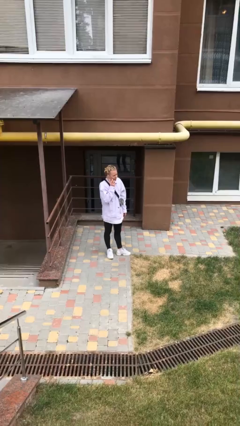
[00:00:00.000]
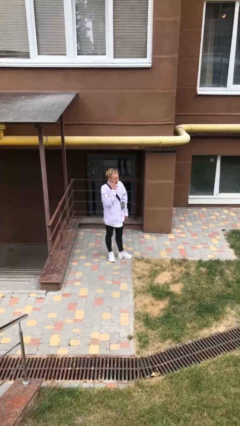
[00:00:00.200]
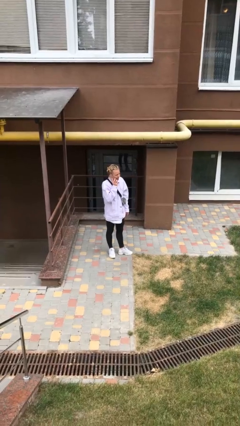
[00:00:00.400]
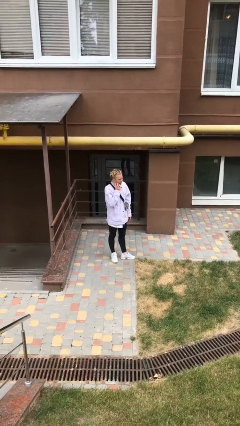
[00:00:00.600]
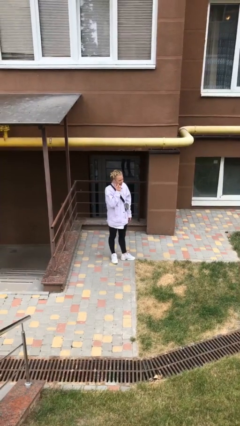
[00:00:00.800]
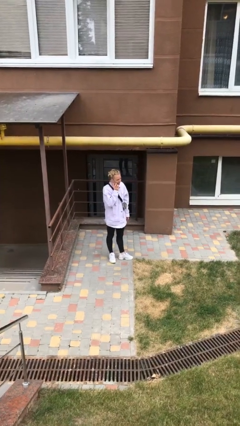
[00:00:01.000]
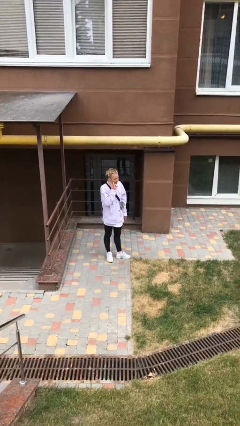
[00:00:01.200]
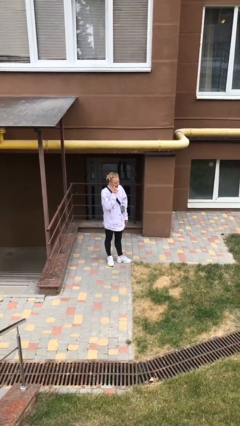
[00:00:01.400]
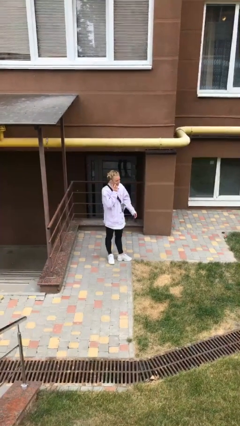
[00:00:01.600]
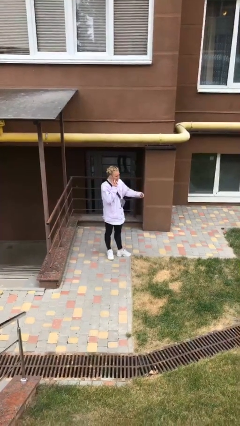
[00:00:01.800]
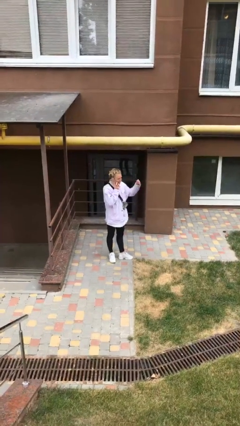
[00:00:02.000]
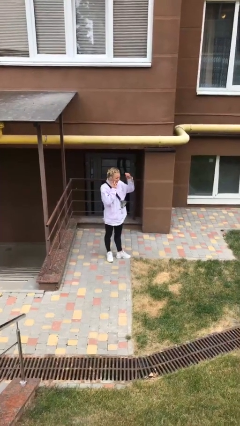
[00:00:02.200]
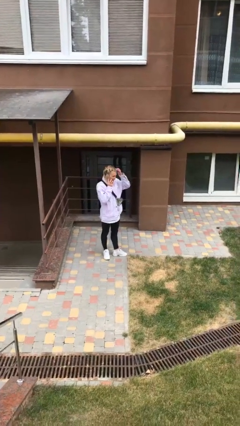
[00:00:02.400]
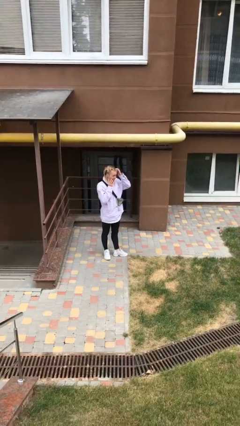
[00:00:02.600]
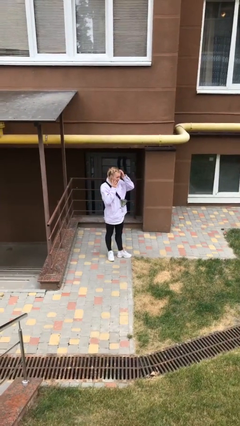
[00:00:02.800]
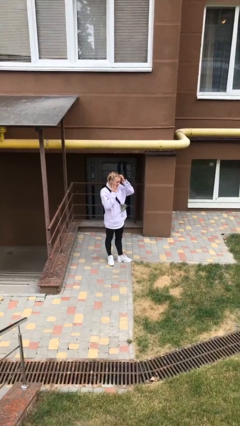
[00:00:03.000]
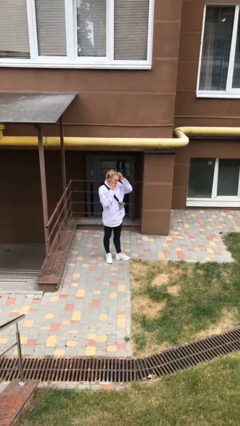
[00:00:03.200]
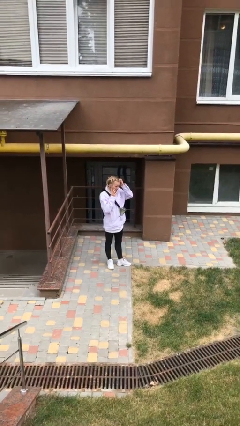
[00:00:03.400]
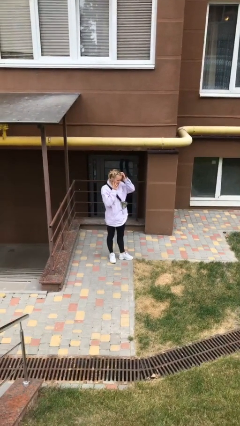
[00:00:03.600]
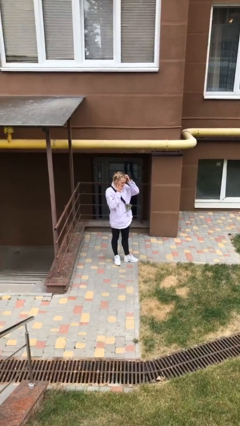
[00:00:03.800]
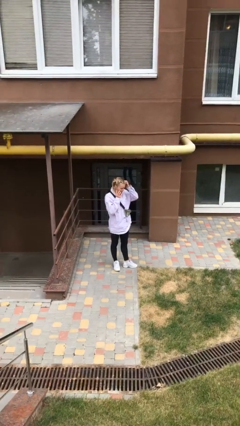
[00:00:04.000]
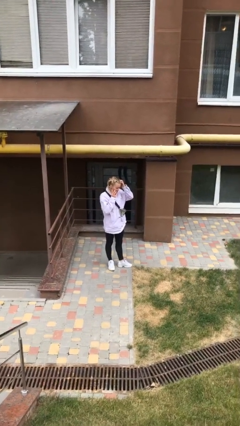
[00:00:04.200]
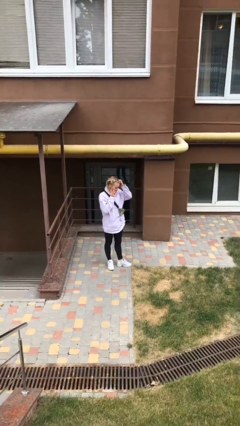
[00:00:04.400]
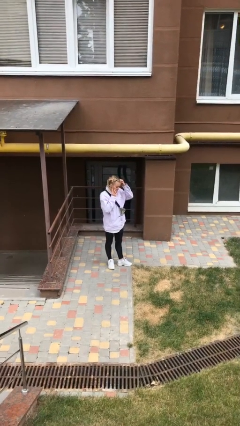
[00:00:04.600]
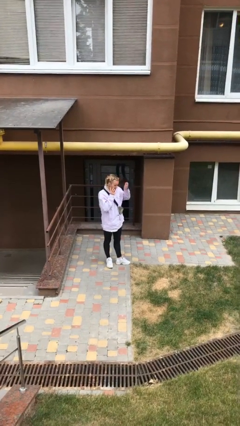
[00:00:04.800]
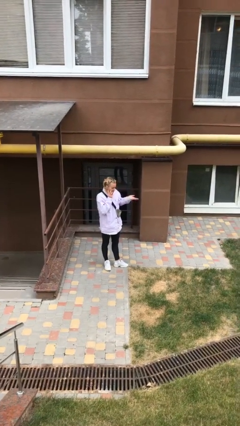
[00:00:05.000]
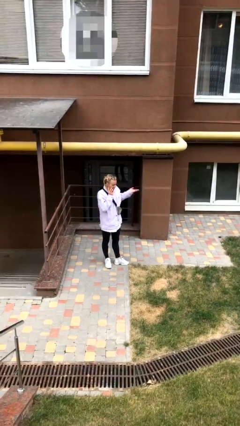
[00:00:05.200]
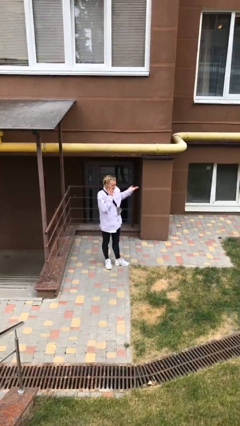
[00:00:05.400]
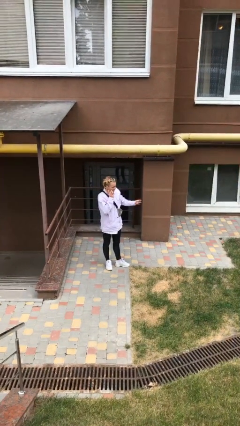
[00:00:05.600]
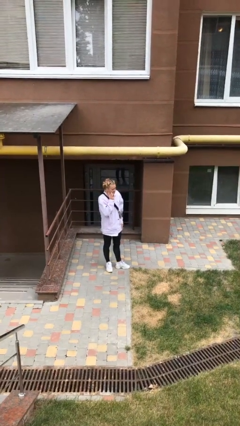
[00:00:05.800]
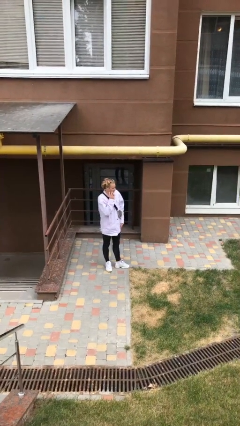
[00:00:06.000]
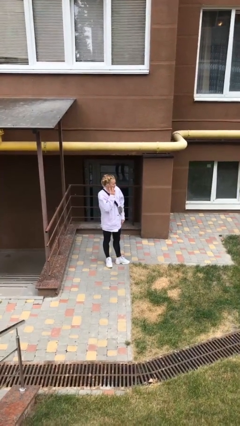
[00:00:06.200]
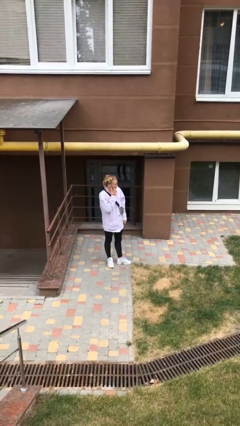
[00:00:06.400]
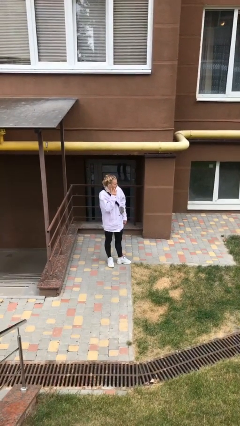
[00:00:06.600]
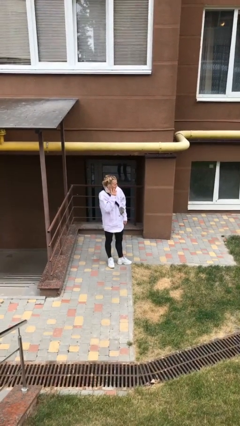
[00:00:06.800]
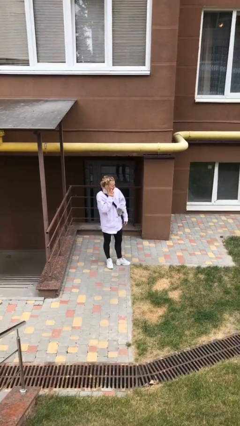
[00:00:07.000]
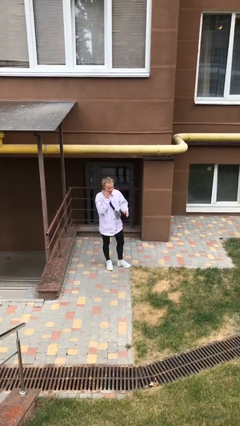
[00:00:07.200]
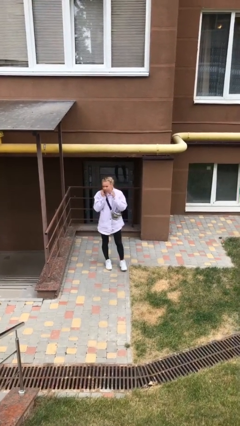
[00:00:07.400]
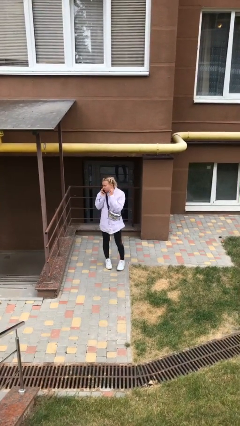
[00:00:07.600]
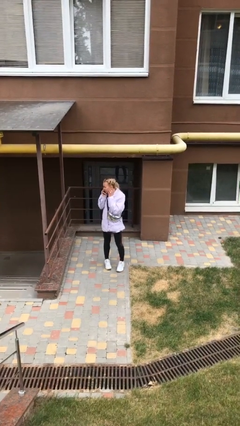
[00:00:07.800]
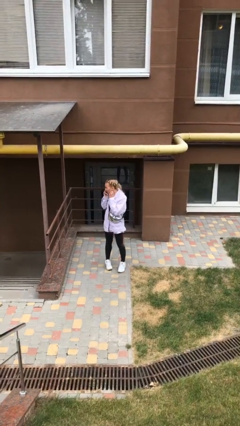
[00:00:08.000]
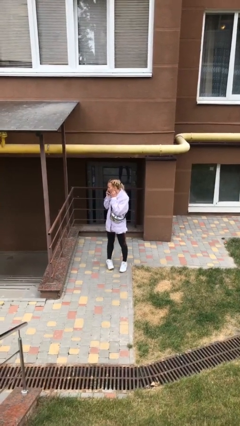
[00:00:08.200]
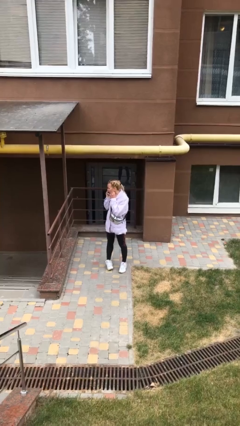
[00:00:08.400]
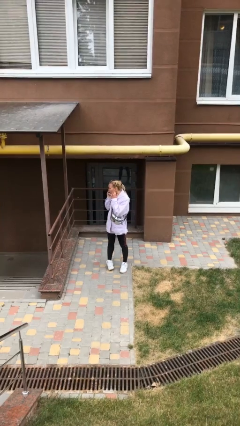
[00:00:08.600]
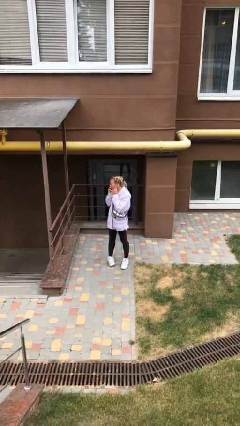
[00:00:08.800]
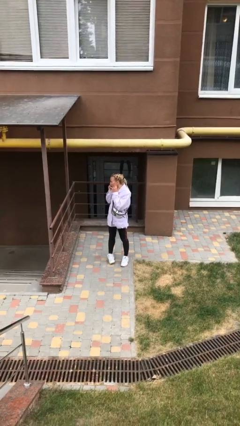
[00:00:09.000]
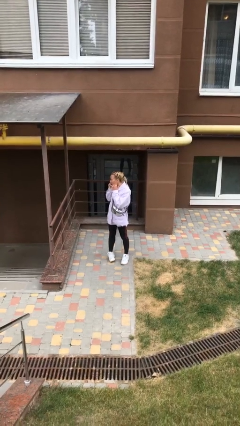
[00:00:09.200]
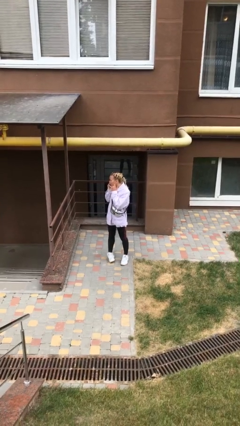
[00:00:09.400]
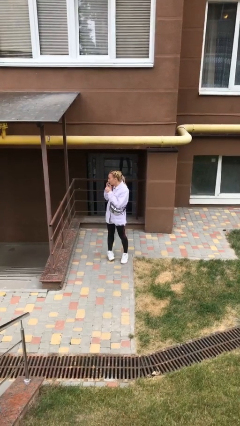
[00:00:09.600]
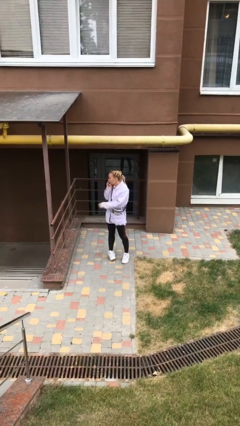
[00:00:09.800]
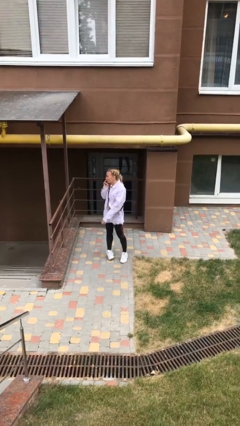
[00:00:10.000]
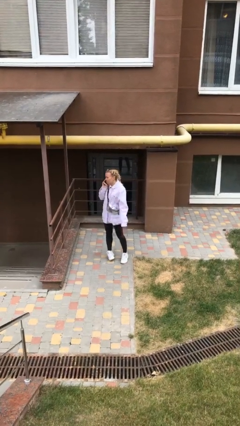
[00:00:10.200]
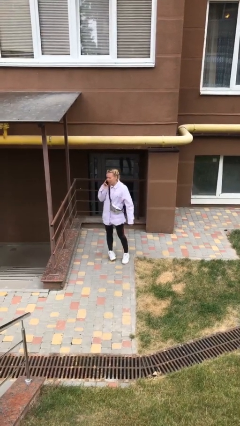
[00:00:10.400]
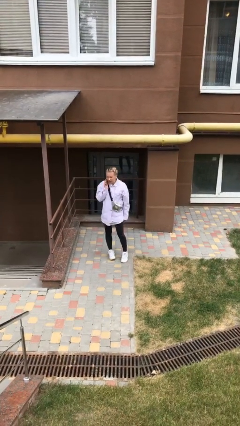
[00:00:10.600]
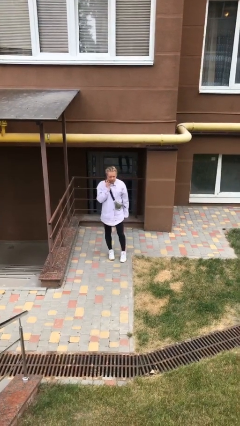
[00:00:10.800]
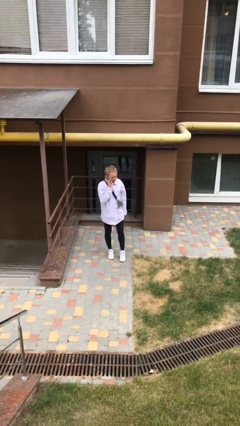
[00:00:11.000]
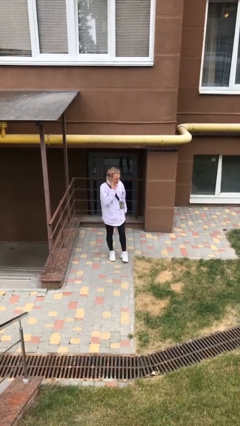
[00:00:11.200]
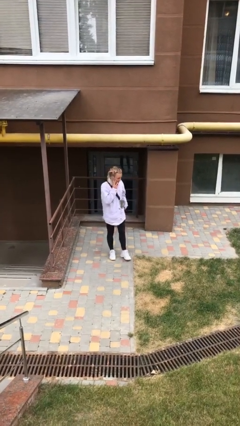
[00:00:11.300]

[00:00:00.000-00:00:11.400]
person talks on phone

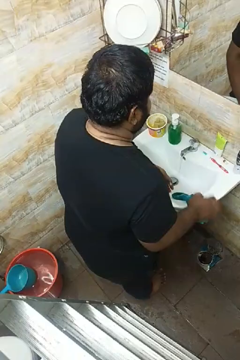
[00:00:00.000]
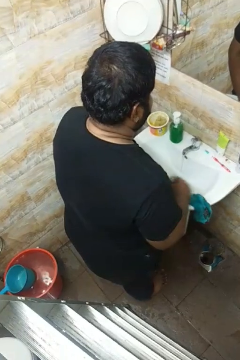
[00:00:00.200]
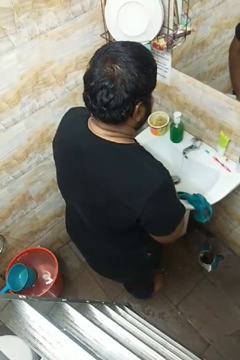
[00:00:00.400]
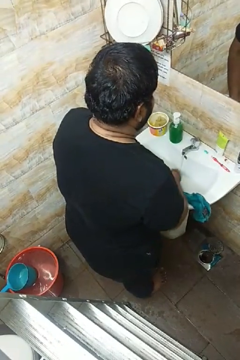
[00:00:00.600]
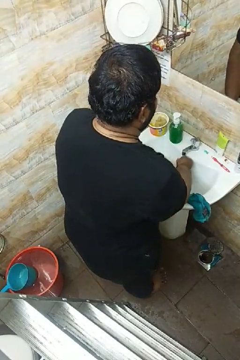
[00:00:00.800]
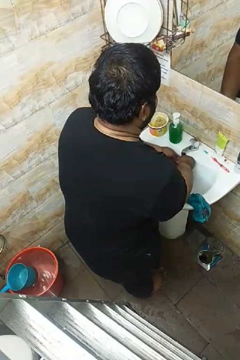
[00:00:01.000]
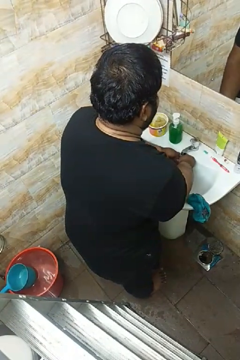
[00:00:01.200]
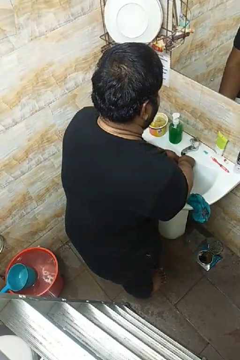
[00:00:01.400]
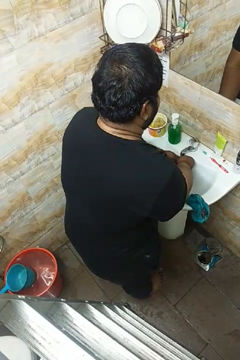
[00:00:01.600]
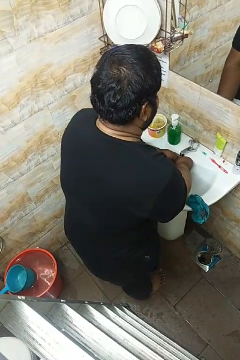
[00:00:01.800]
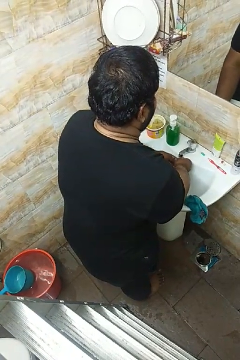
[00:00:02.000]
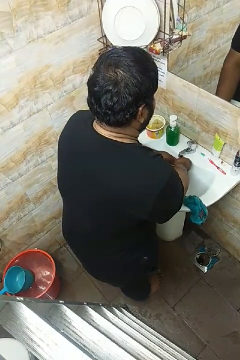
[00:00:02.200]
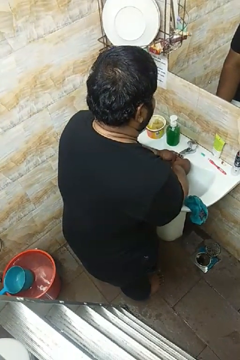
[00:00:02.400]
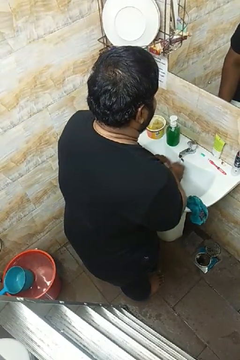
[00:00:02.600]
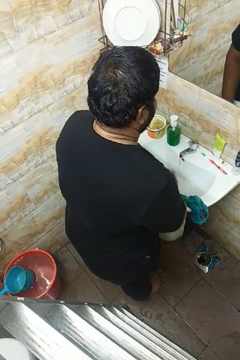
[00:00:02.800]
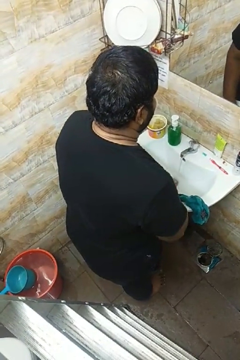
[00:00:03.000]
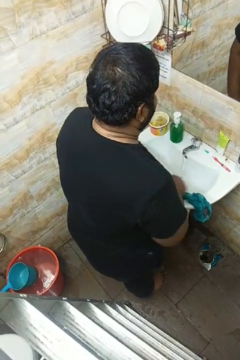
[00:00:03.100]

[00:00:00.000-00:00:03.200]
person washes hands

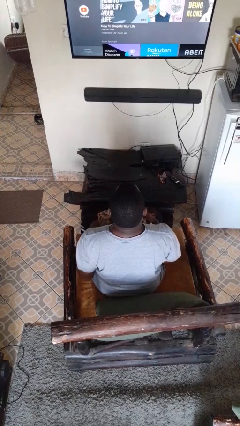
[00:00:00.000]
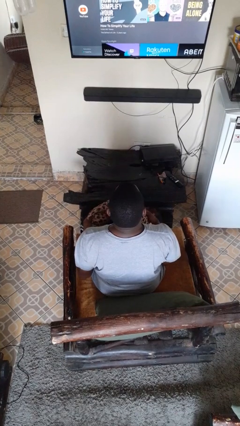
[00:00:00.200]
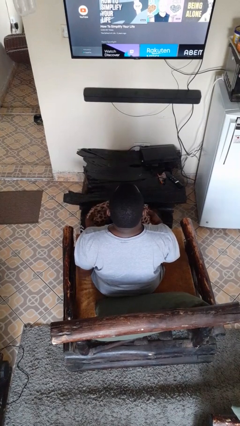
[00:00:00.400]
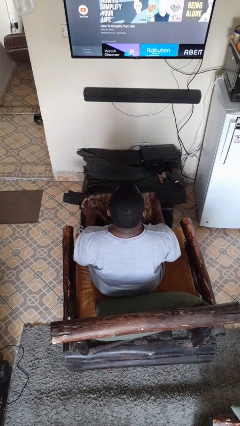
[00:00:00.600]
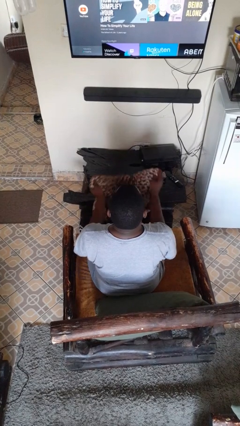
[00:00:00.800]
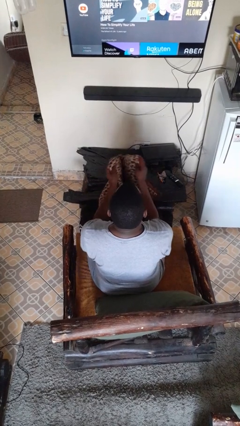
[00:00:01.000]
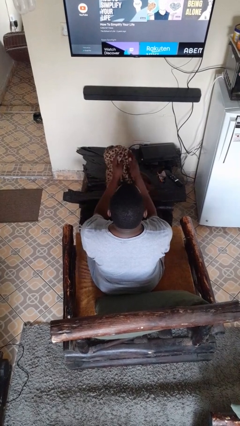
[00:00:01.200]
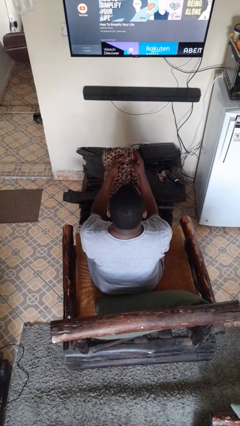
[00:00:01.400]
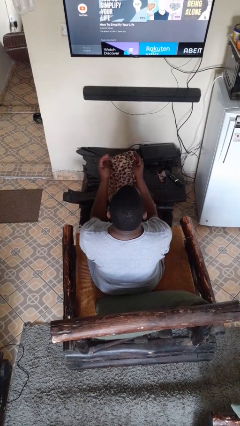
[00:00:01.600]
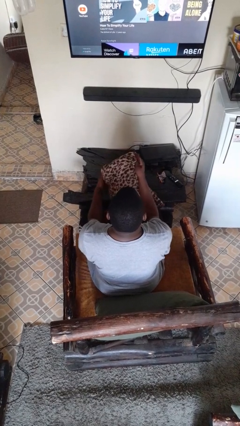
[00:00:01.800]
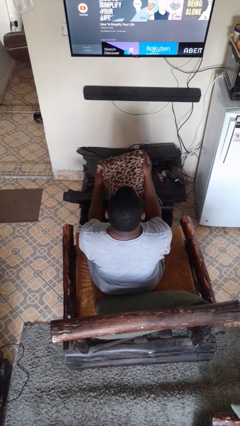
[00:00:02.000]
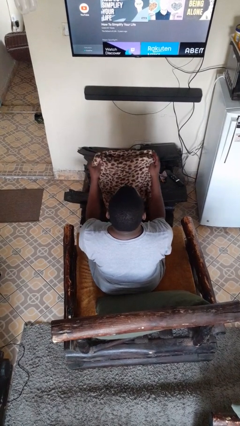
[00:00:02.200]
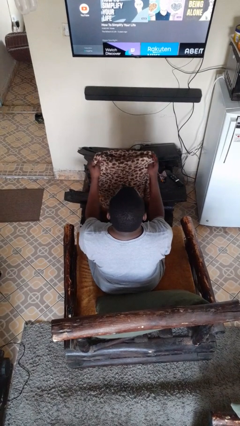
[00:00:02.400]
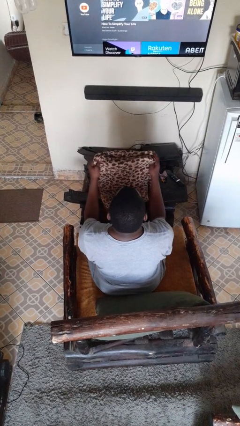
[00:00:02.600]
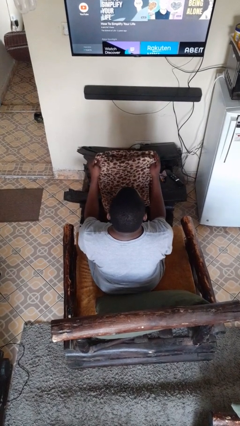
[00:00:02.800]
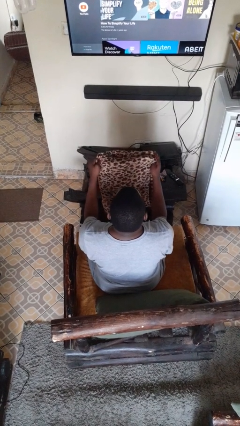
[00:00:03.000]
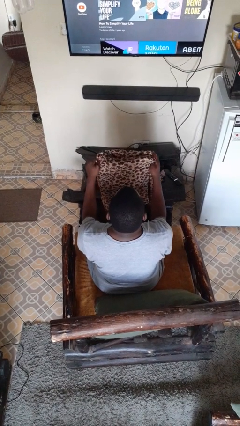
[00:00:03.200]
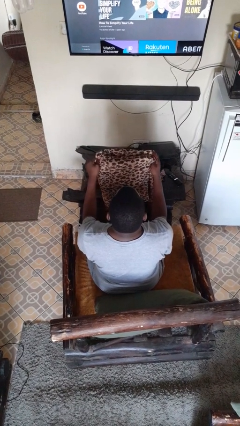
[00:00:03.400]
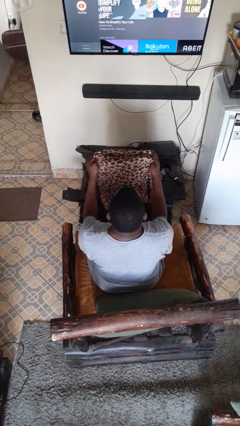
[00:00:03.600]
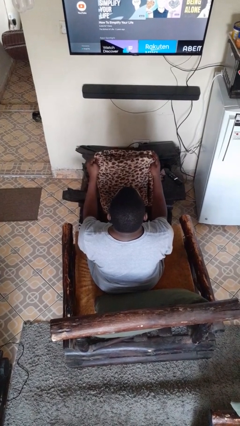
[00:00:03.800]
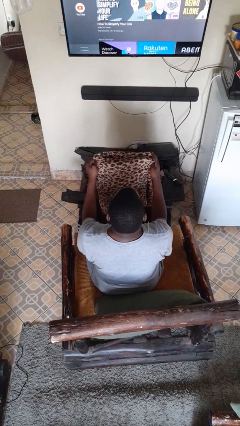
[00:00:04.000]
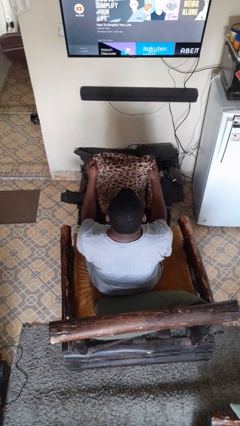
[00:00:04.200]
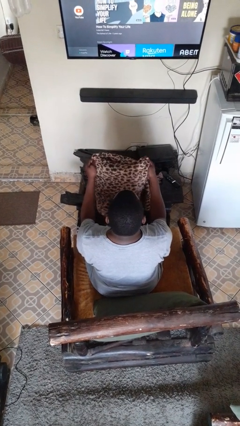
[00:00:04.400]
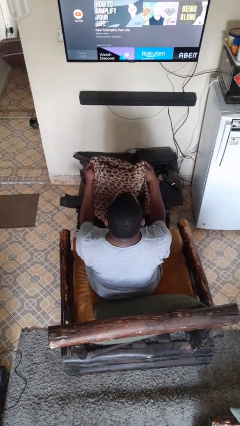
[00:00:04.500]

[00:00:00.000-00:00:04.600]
person folds blanket
